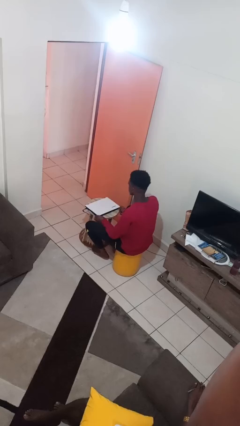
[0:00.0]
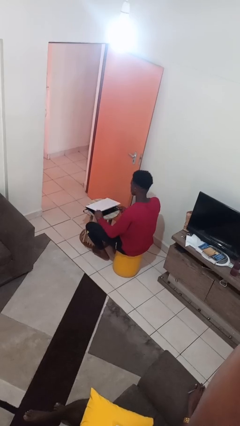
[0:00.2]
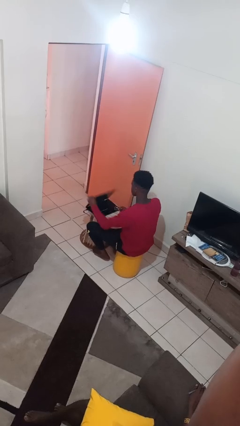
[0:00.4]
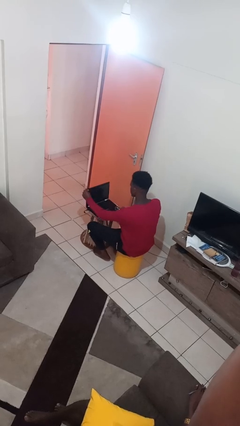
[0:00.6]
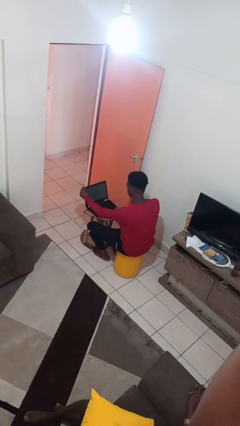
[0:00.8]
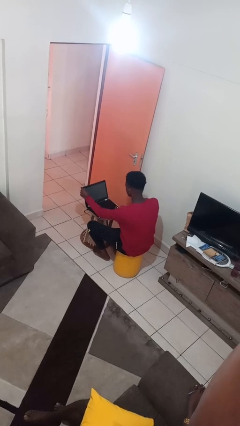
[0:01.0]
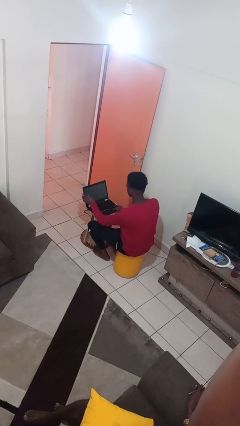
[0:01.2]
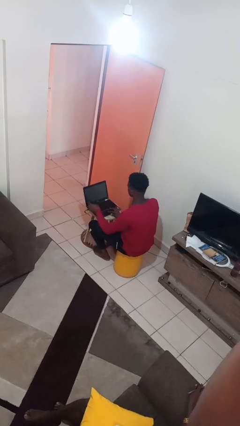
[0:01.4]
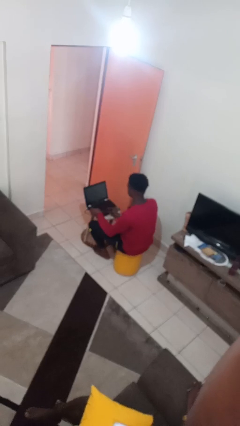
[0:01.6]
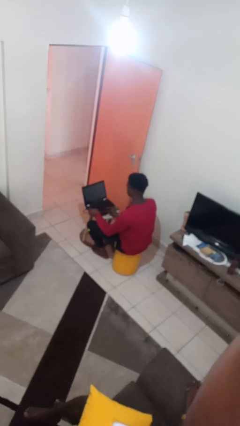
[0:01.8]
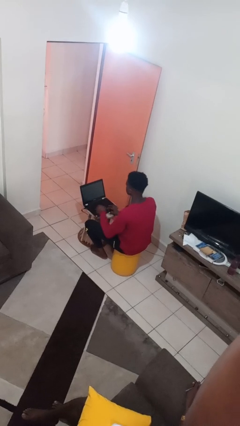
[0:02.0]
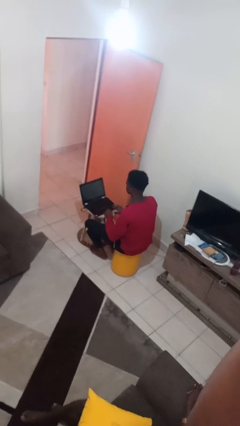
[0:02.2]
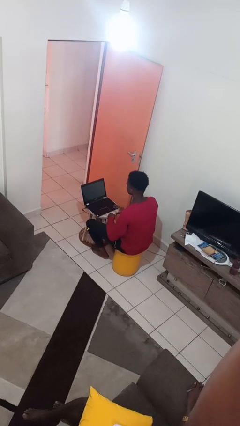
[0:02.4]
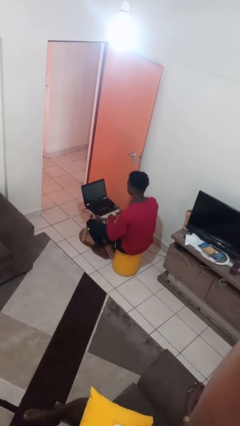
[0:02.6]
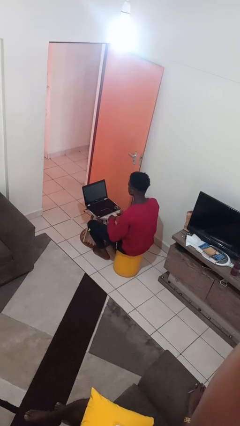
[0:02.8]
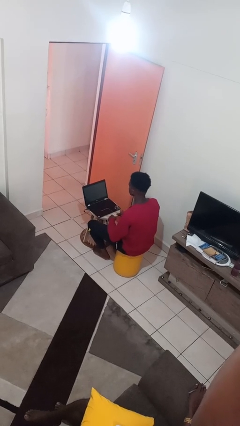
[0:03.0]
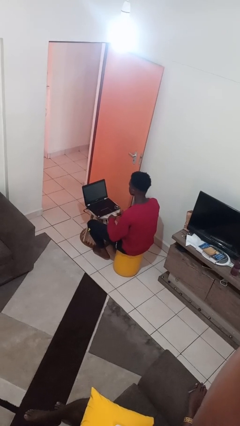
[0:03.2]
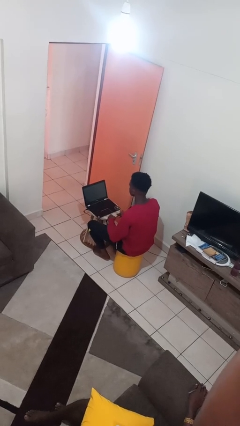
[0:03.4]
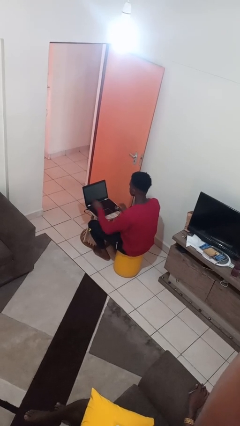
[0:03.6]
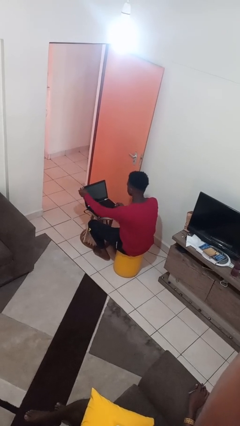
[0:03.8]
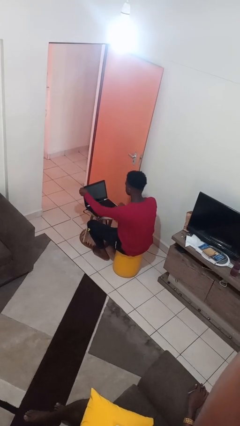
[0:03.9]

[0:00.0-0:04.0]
person opens laptop

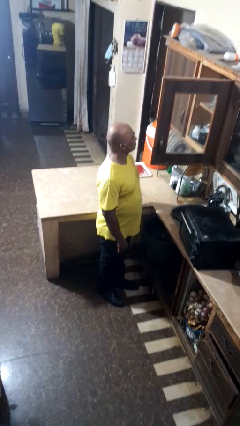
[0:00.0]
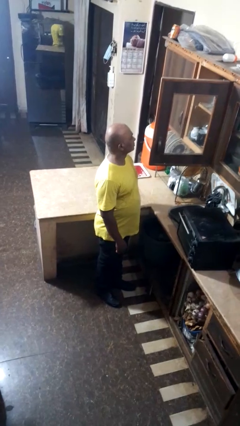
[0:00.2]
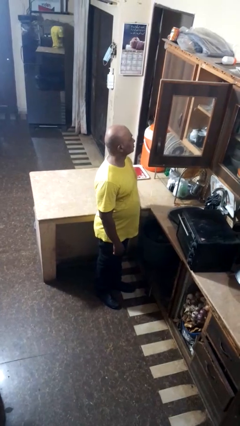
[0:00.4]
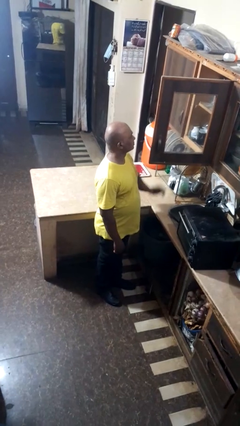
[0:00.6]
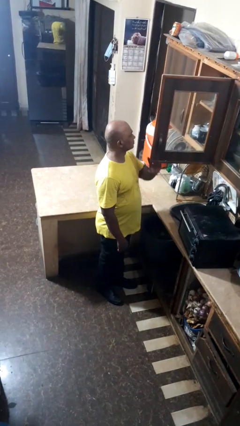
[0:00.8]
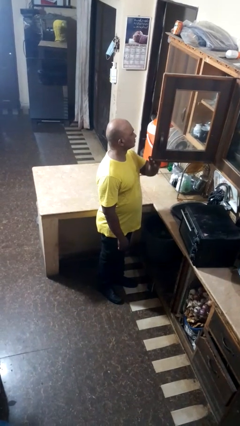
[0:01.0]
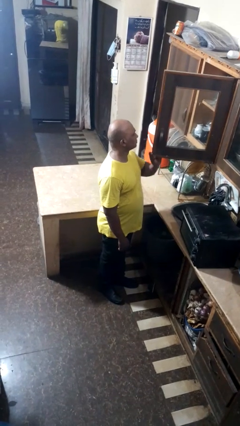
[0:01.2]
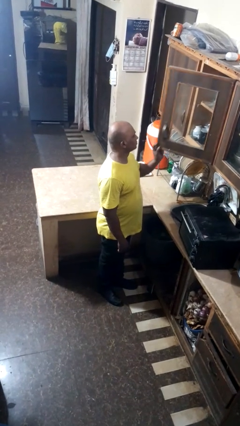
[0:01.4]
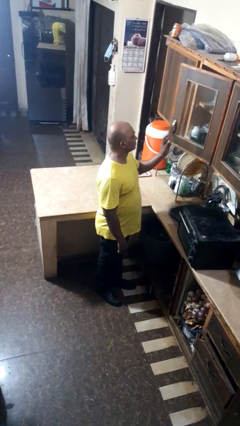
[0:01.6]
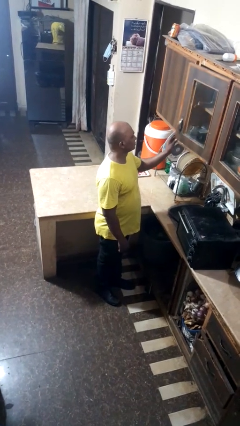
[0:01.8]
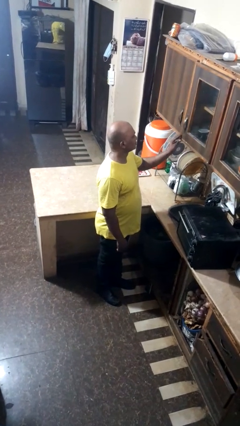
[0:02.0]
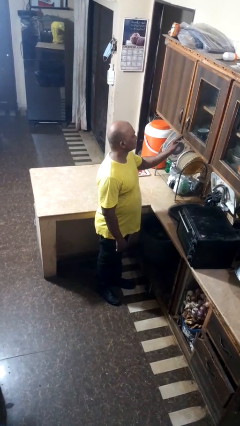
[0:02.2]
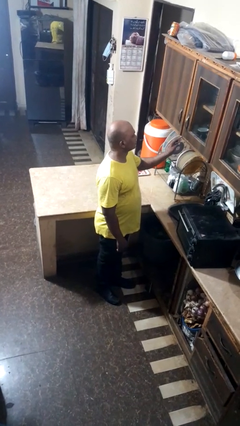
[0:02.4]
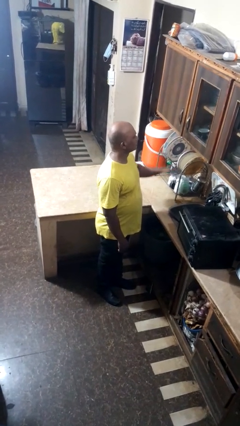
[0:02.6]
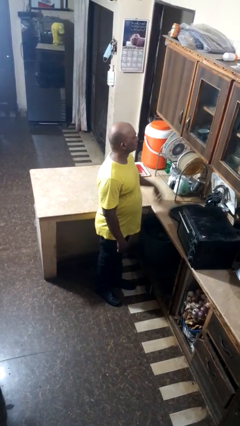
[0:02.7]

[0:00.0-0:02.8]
person closes cabinet

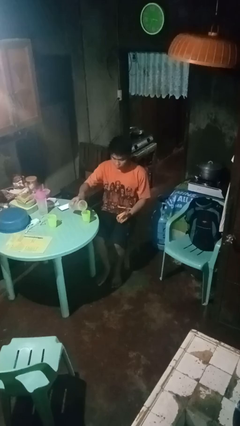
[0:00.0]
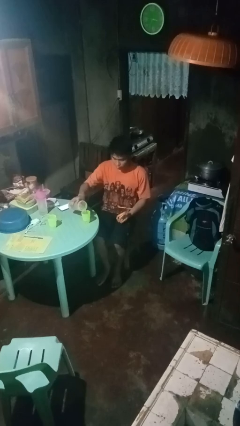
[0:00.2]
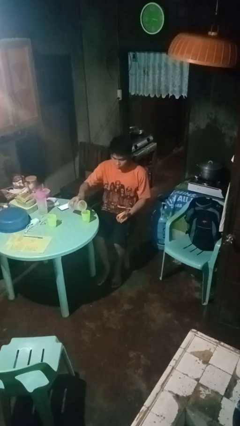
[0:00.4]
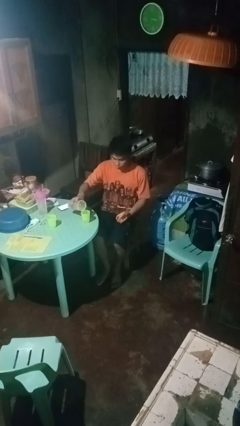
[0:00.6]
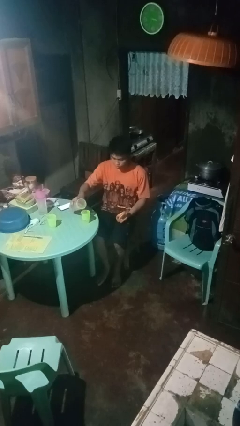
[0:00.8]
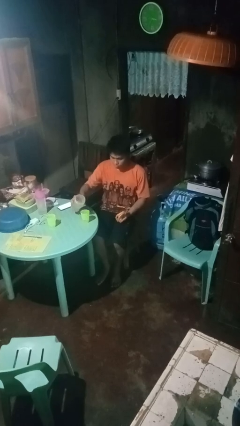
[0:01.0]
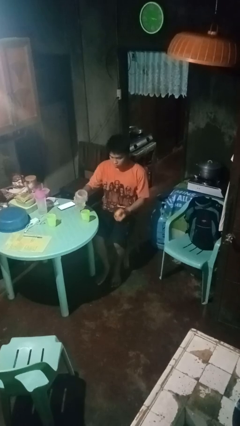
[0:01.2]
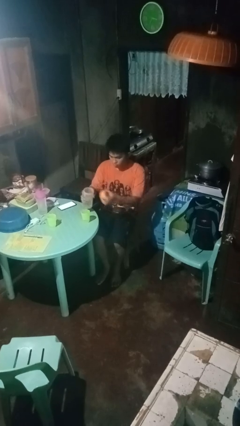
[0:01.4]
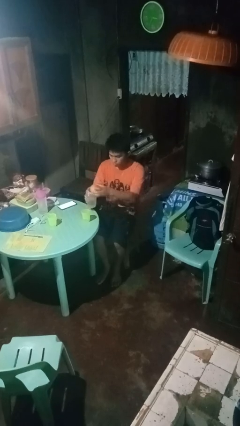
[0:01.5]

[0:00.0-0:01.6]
person pours liquid into cup

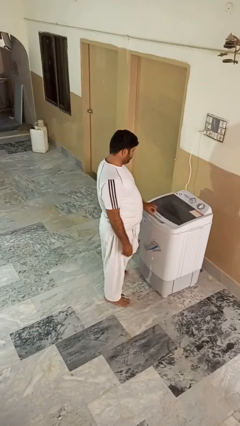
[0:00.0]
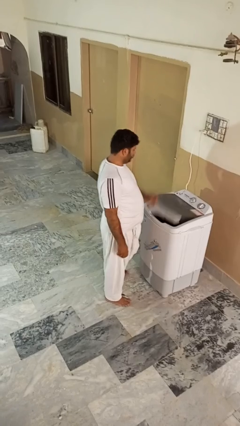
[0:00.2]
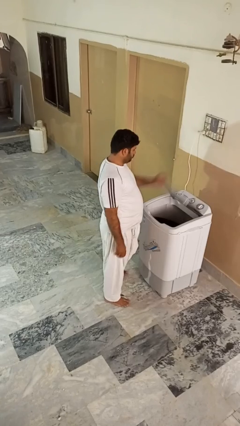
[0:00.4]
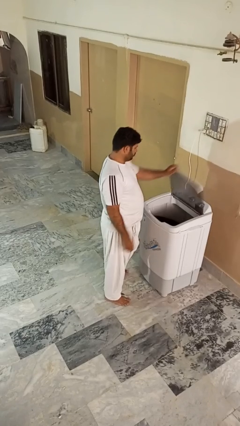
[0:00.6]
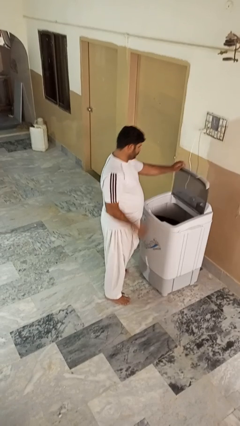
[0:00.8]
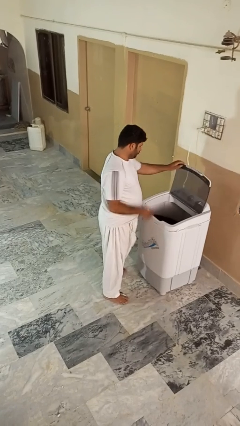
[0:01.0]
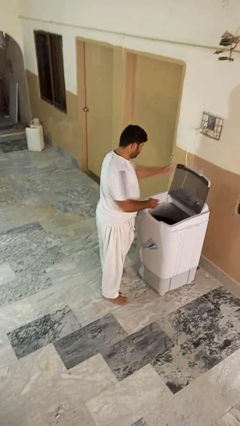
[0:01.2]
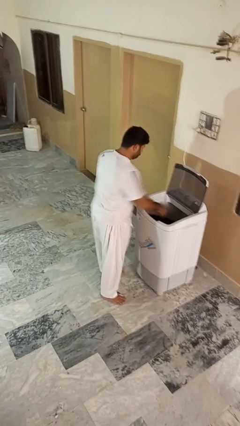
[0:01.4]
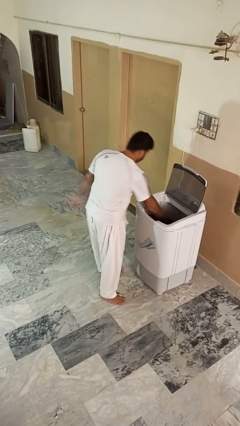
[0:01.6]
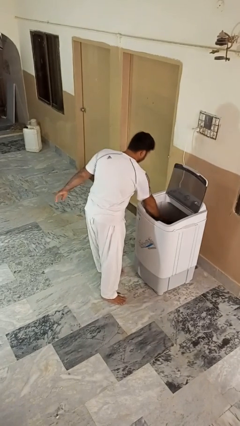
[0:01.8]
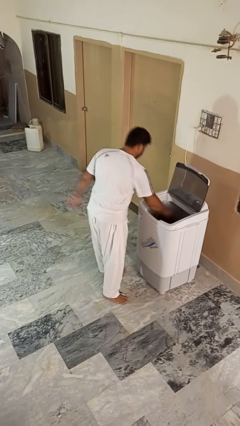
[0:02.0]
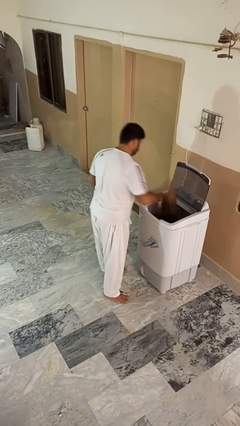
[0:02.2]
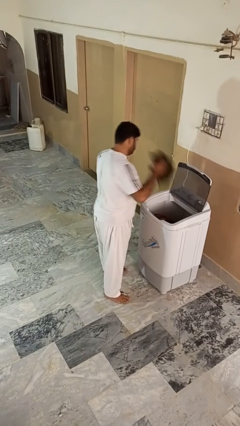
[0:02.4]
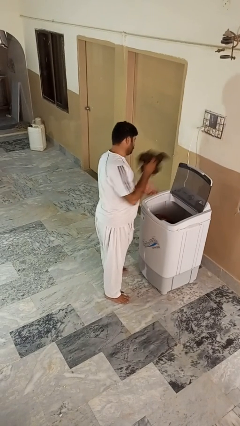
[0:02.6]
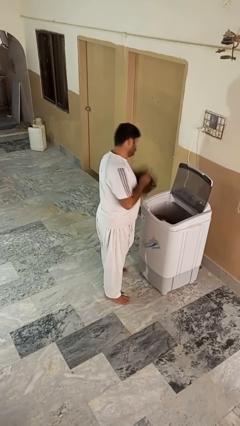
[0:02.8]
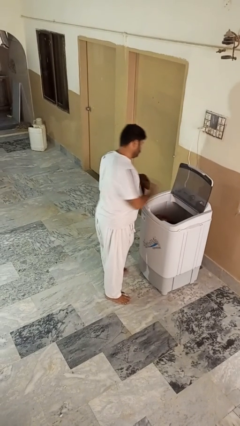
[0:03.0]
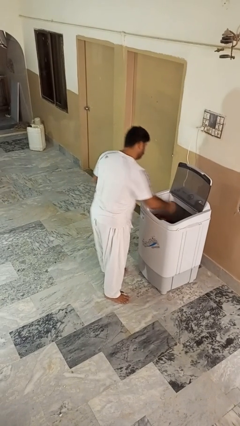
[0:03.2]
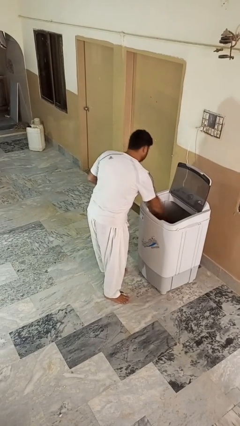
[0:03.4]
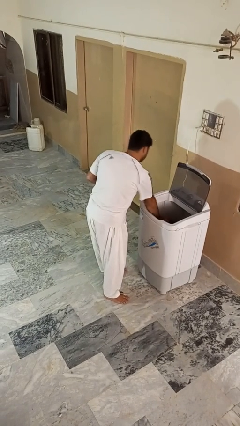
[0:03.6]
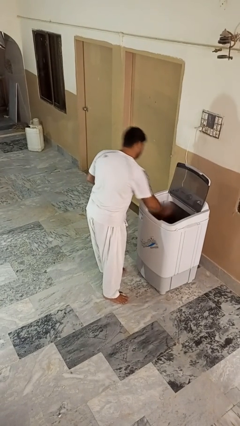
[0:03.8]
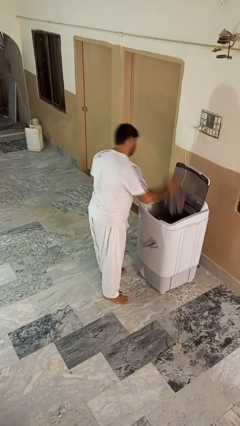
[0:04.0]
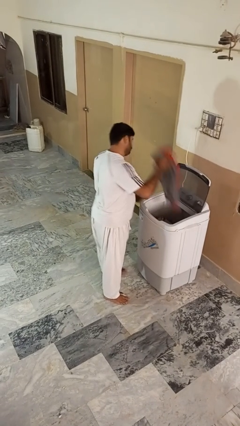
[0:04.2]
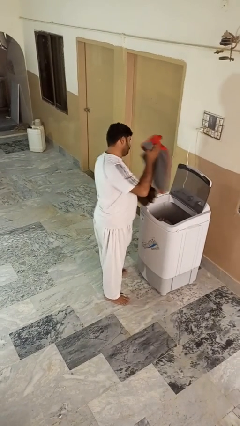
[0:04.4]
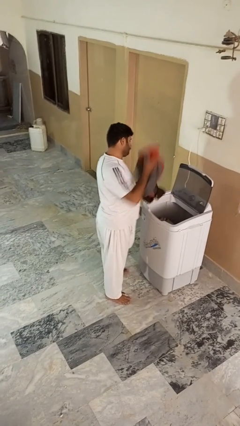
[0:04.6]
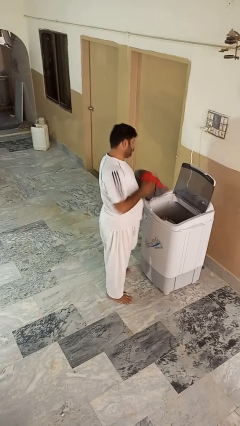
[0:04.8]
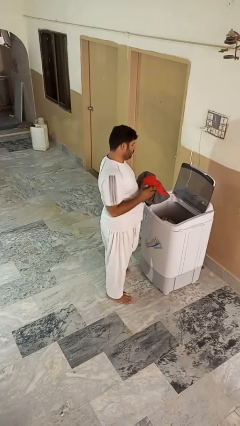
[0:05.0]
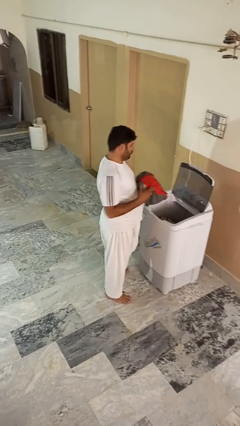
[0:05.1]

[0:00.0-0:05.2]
person unloads clotheswasher

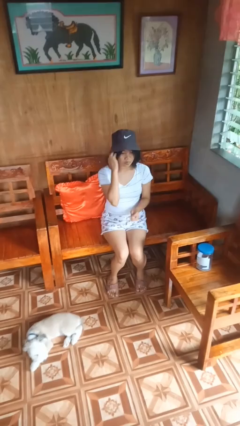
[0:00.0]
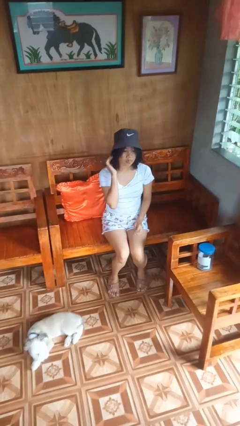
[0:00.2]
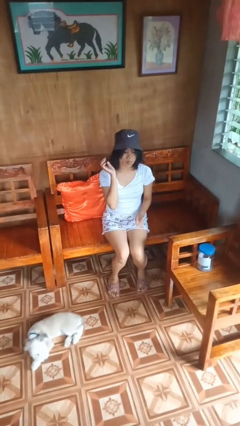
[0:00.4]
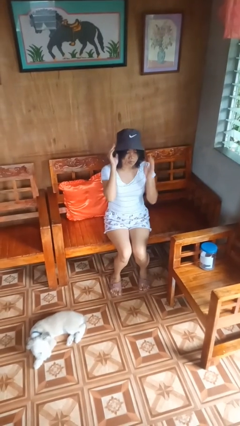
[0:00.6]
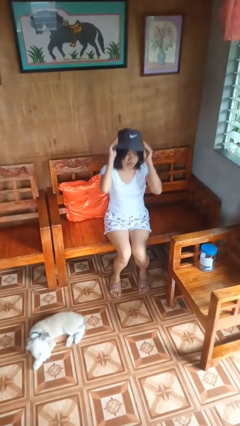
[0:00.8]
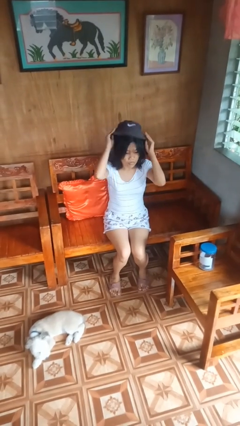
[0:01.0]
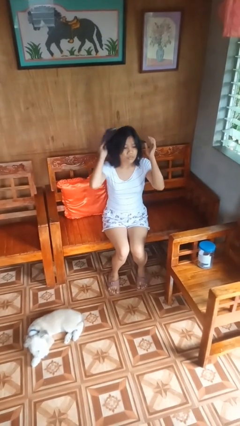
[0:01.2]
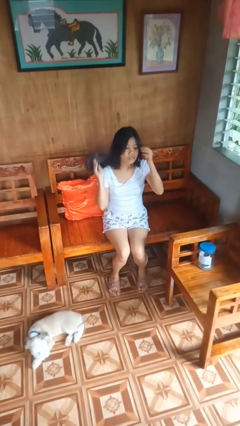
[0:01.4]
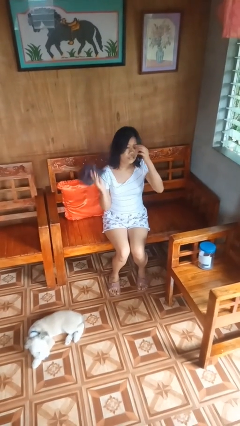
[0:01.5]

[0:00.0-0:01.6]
person takes off hat

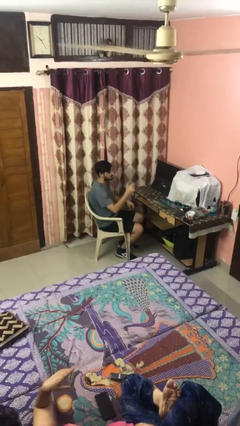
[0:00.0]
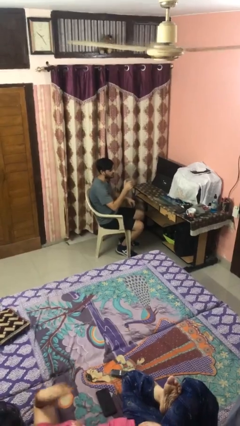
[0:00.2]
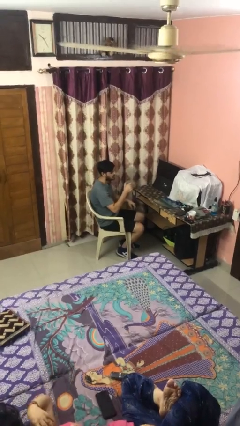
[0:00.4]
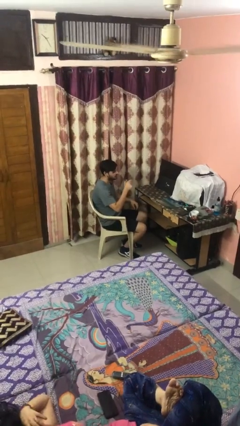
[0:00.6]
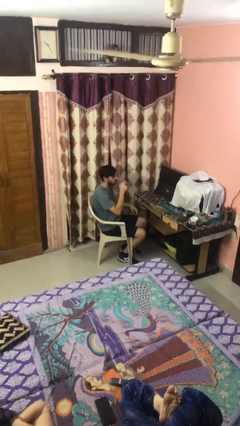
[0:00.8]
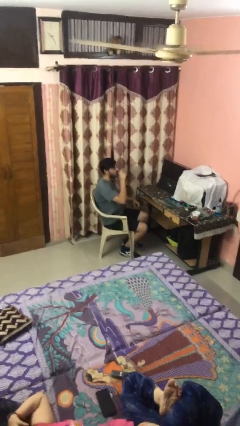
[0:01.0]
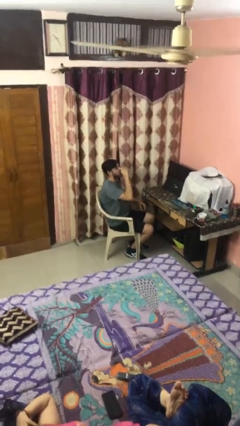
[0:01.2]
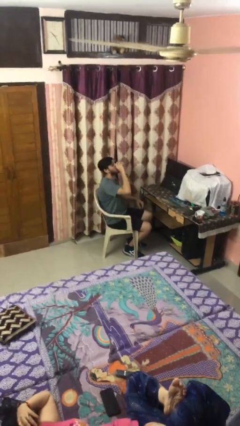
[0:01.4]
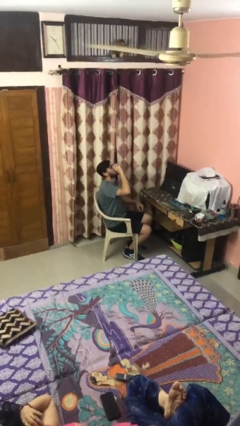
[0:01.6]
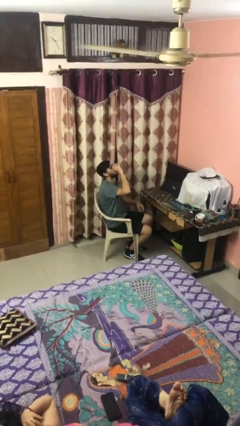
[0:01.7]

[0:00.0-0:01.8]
person drinks from shotglass

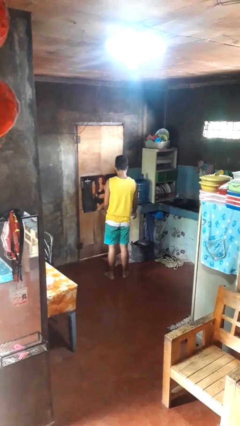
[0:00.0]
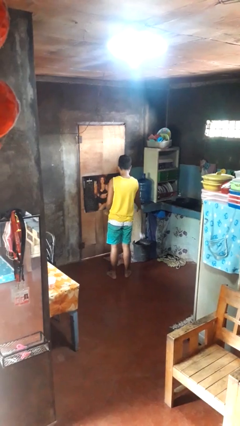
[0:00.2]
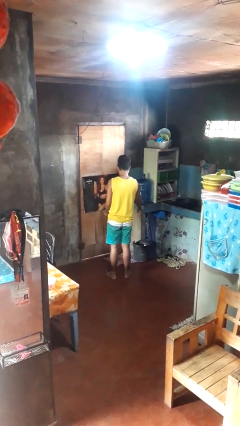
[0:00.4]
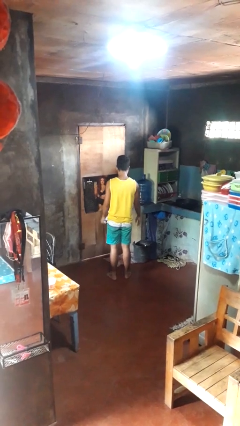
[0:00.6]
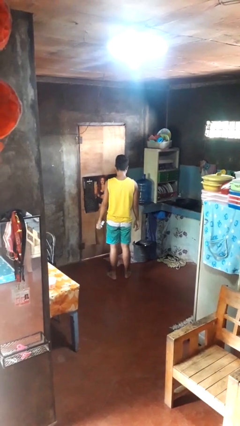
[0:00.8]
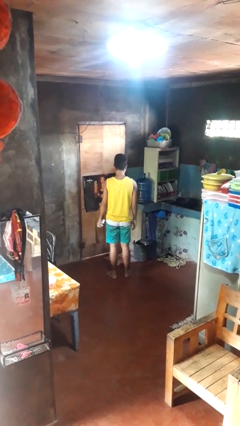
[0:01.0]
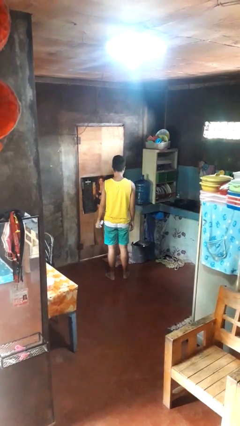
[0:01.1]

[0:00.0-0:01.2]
person discards trash
